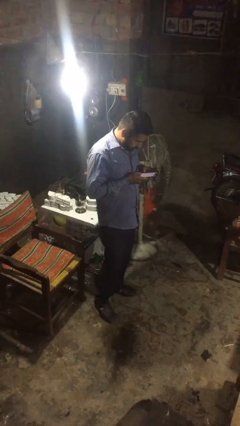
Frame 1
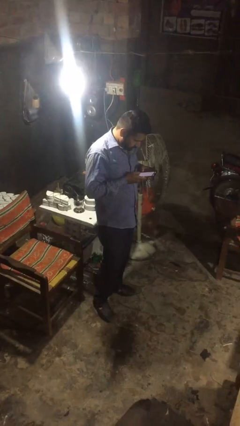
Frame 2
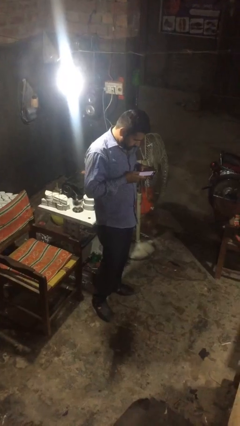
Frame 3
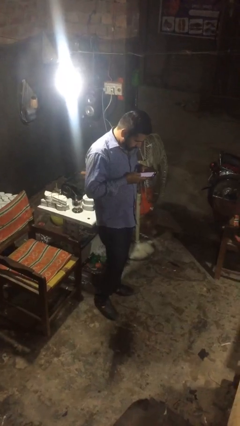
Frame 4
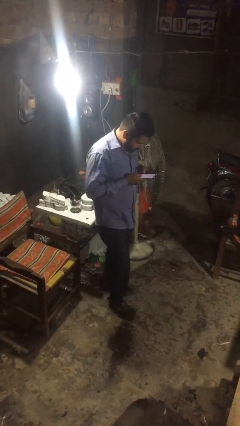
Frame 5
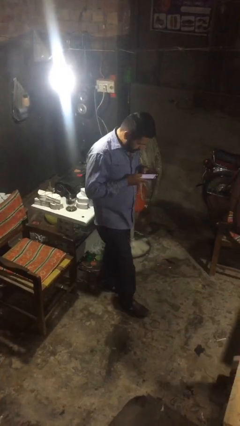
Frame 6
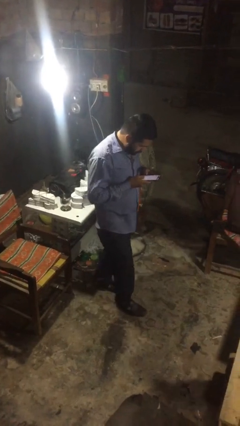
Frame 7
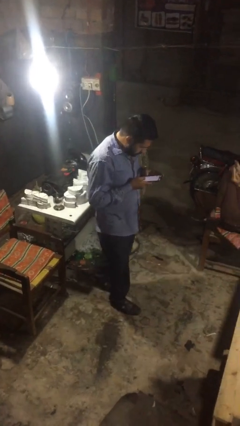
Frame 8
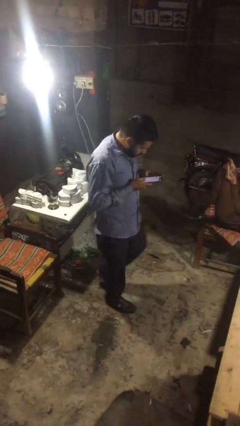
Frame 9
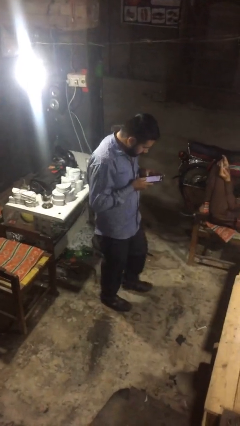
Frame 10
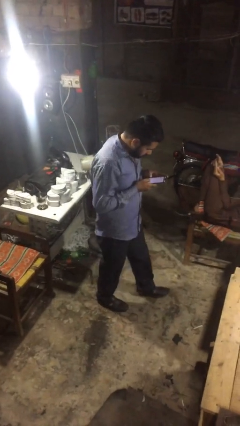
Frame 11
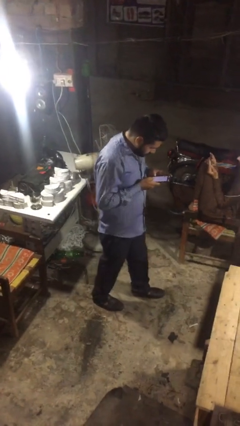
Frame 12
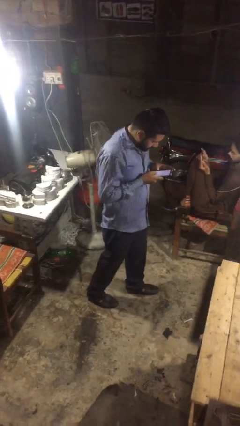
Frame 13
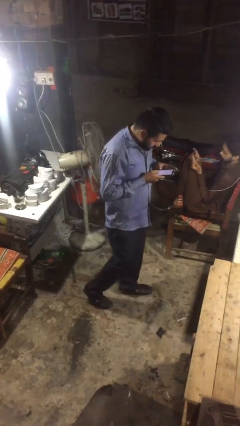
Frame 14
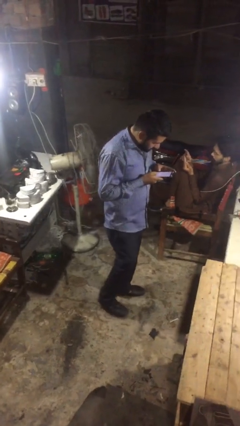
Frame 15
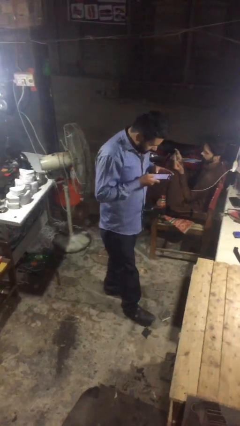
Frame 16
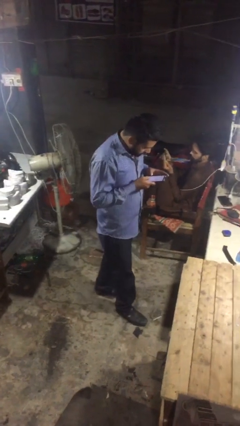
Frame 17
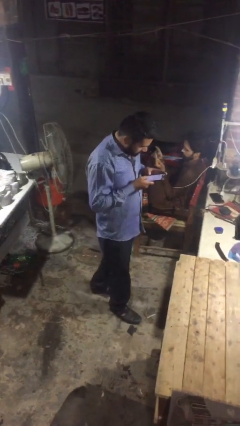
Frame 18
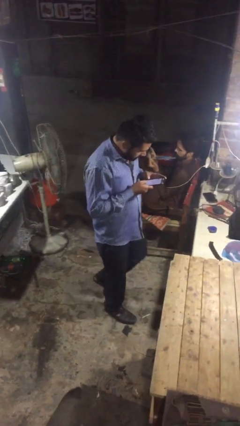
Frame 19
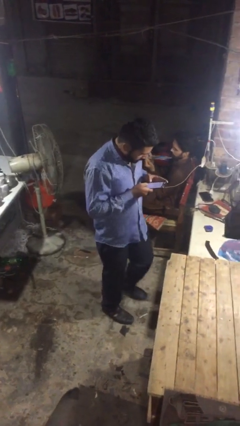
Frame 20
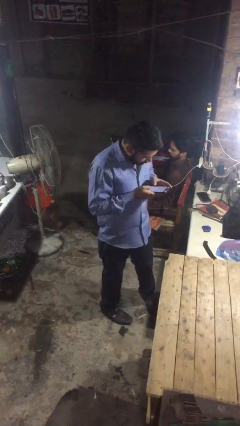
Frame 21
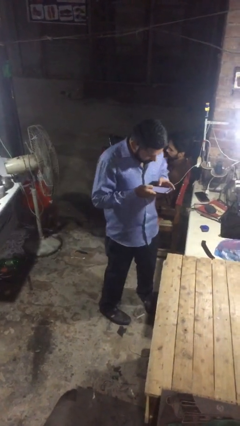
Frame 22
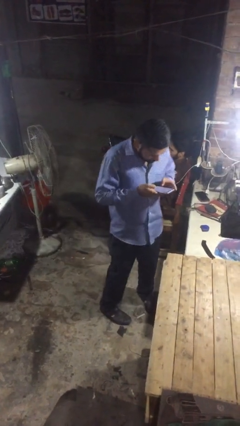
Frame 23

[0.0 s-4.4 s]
person texts on phone

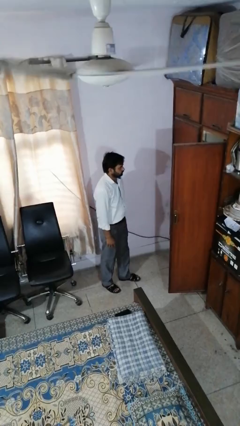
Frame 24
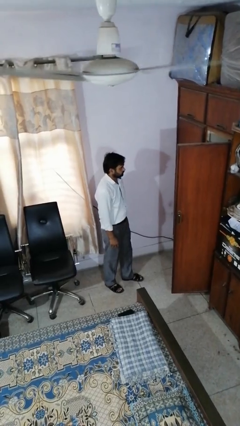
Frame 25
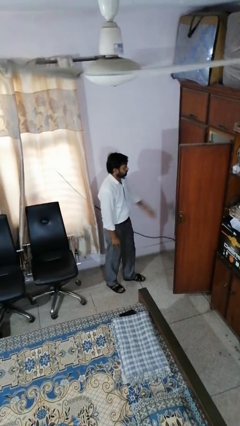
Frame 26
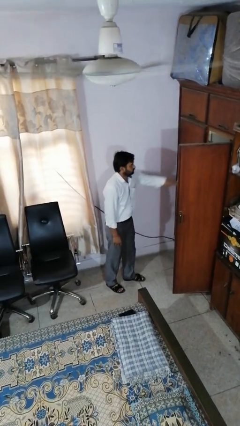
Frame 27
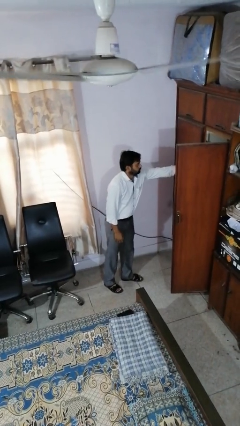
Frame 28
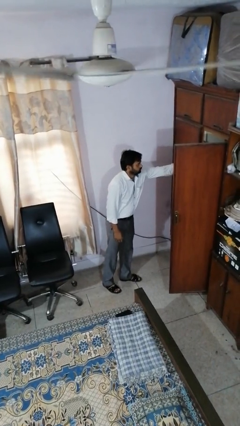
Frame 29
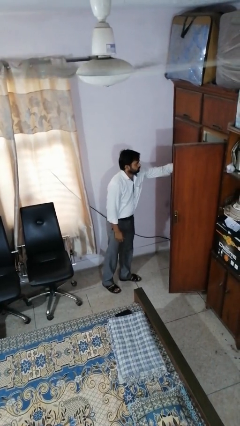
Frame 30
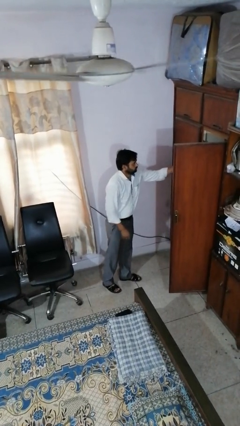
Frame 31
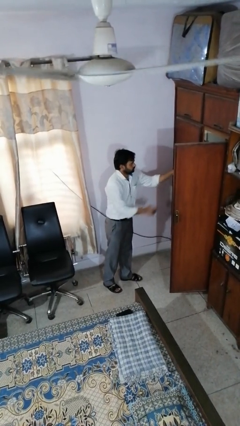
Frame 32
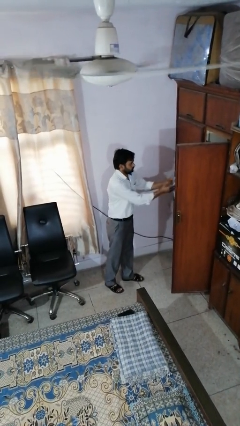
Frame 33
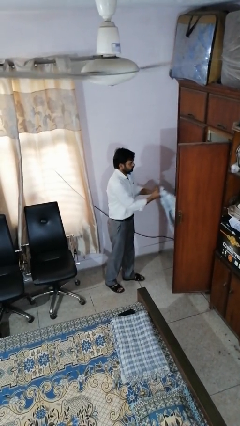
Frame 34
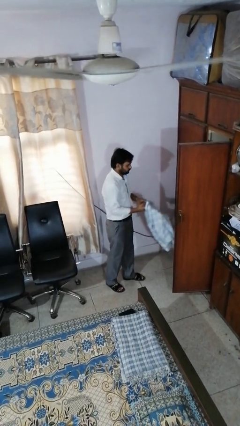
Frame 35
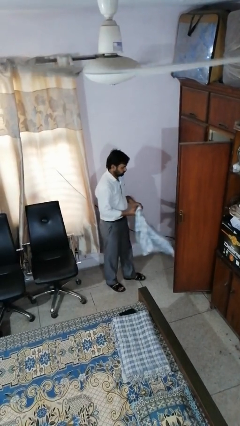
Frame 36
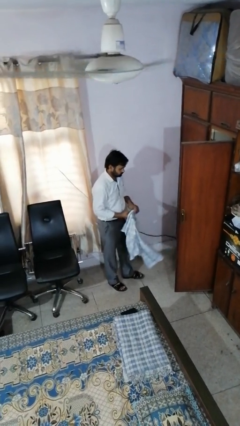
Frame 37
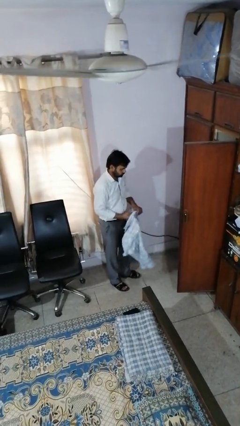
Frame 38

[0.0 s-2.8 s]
person takes clothes from closet

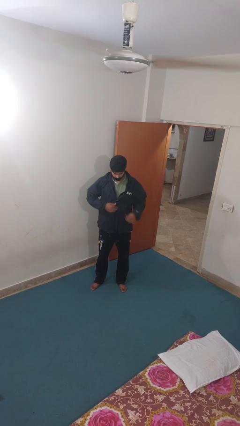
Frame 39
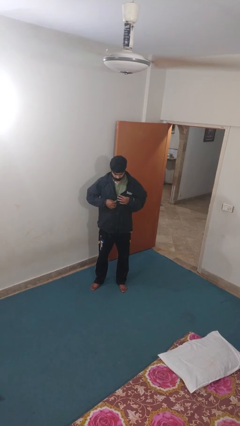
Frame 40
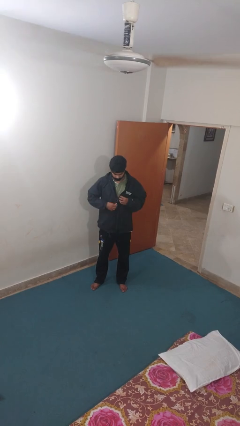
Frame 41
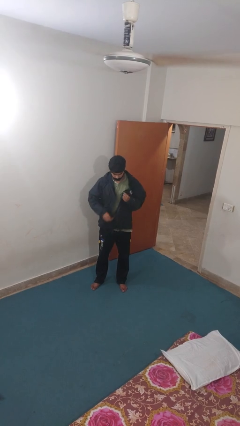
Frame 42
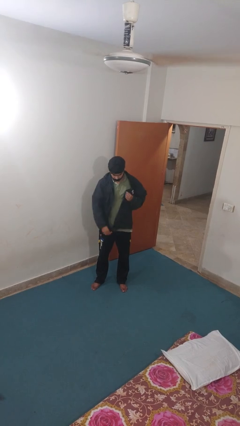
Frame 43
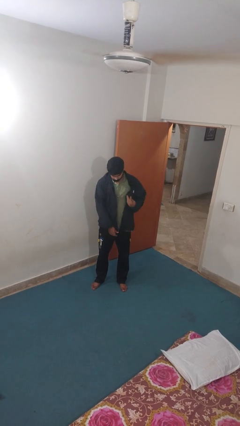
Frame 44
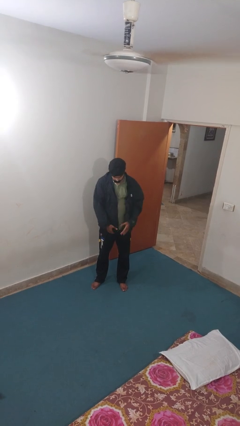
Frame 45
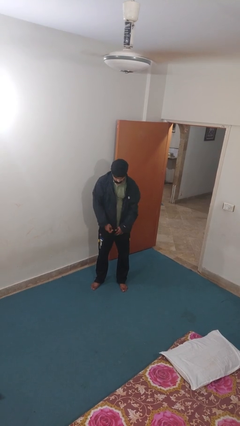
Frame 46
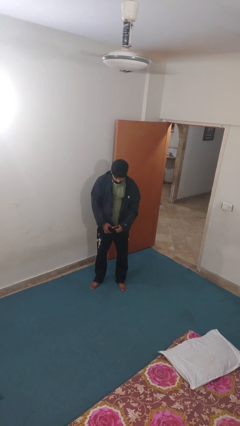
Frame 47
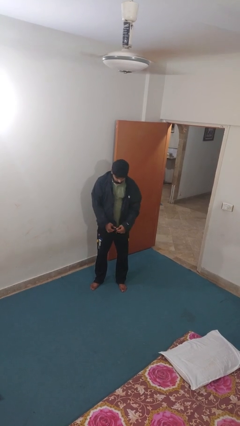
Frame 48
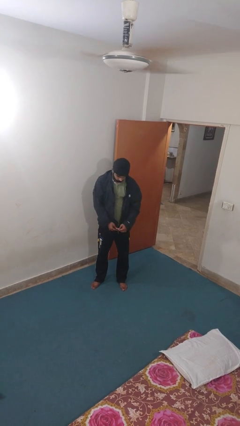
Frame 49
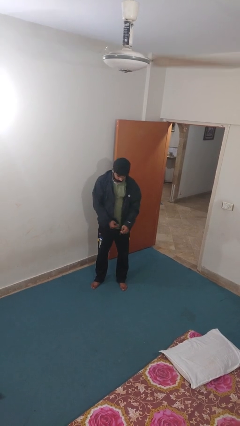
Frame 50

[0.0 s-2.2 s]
person unzips jacket

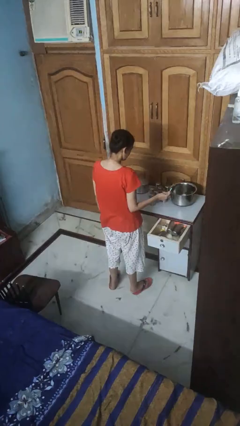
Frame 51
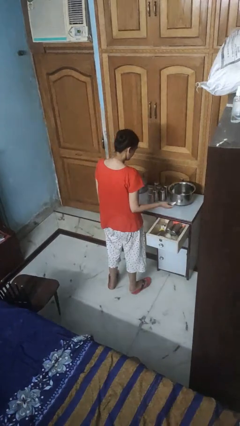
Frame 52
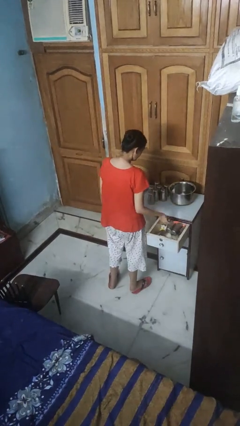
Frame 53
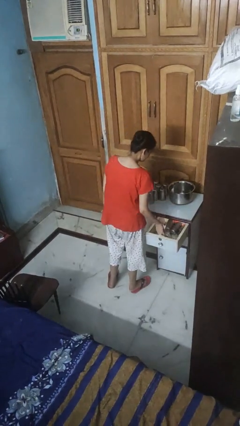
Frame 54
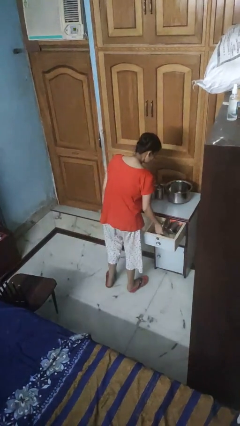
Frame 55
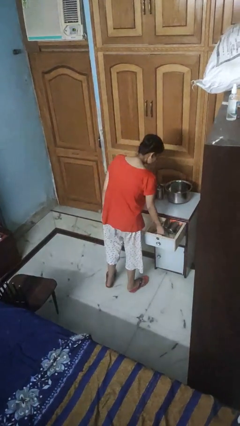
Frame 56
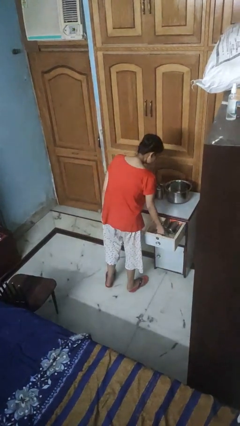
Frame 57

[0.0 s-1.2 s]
person puts object into kitchen drawer

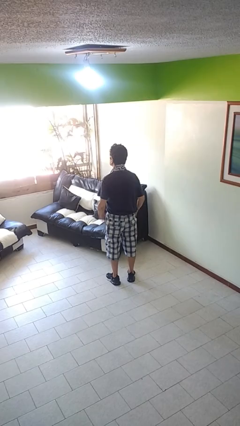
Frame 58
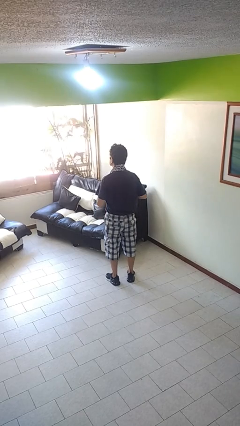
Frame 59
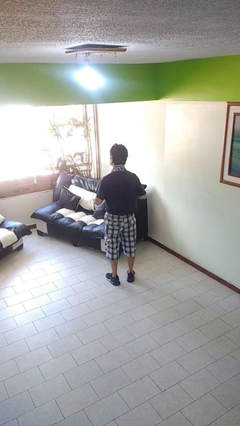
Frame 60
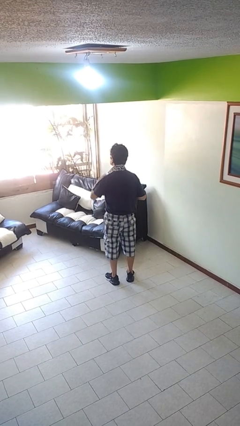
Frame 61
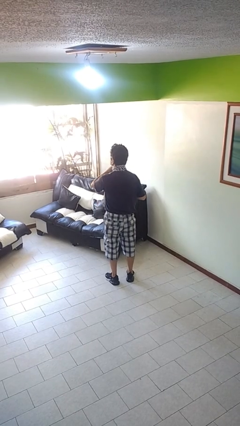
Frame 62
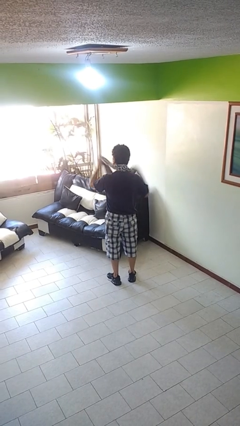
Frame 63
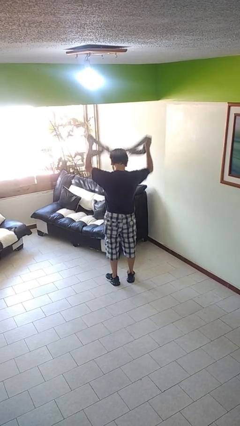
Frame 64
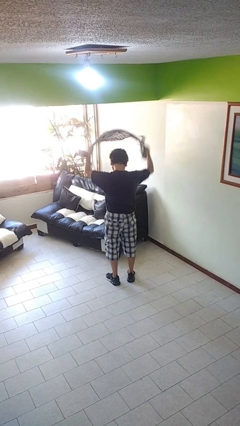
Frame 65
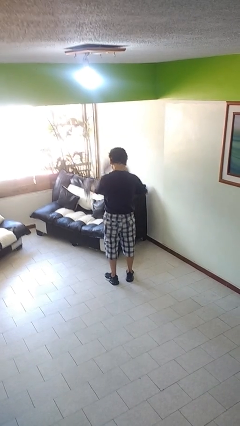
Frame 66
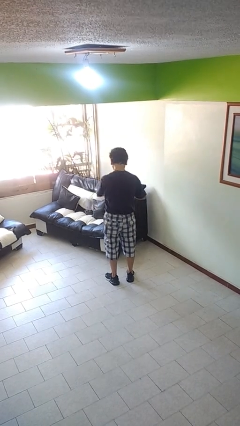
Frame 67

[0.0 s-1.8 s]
person takes off scarf

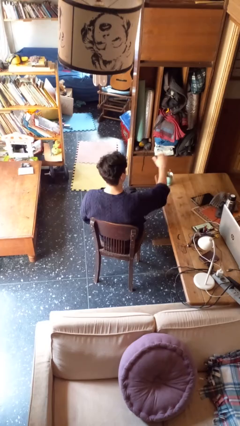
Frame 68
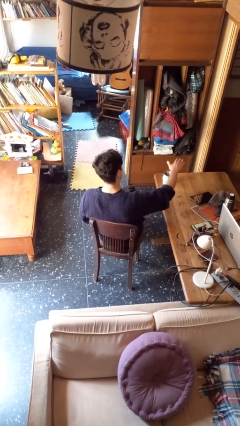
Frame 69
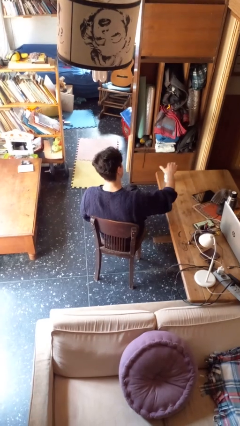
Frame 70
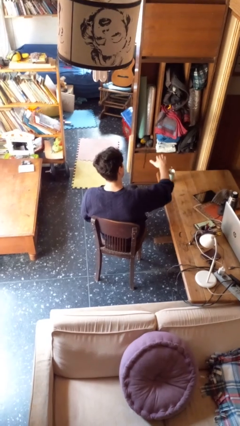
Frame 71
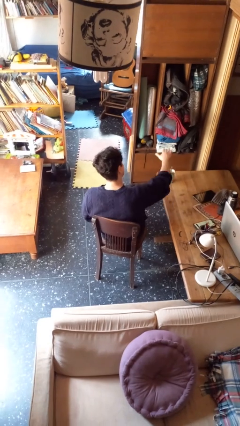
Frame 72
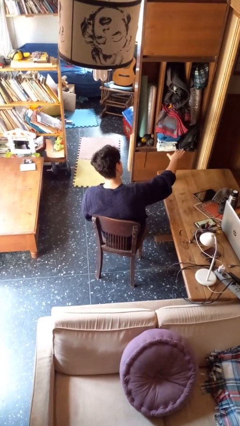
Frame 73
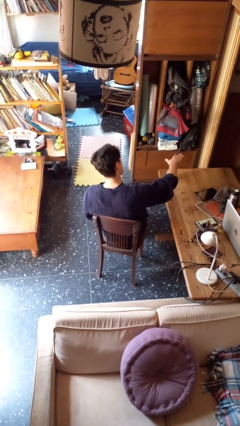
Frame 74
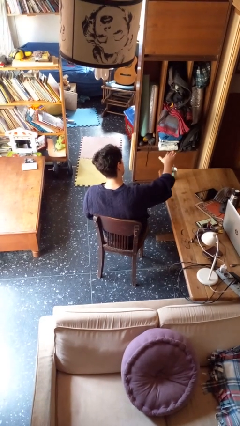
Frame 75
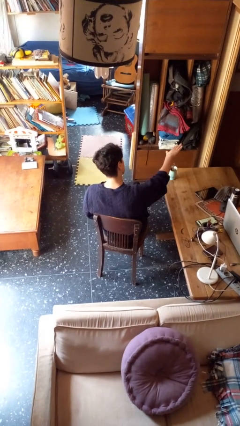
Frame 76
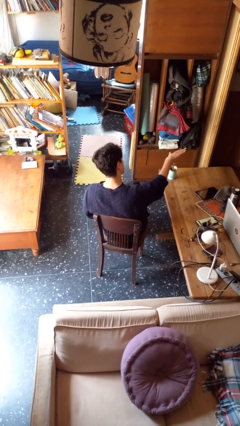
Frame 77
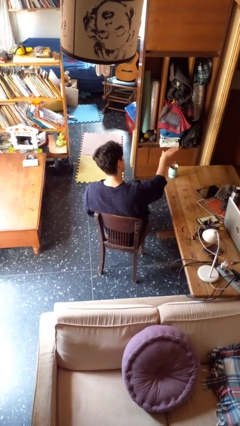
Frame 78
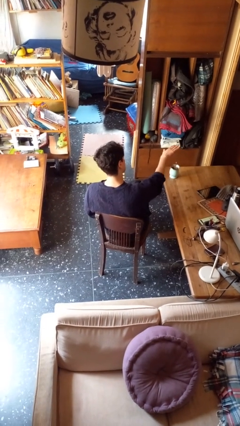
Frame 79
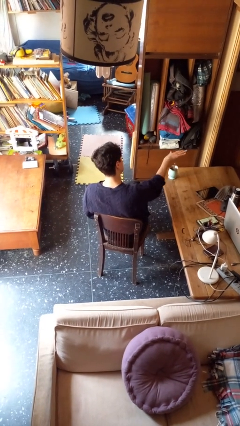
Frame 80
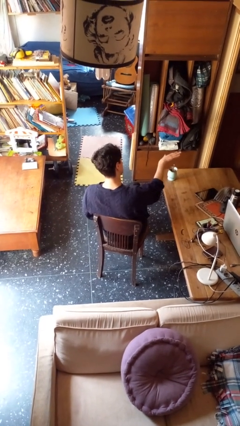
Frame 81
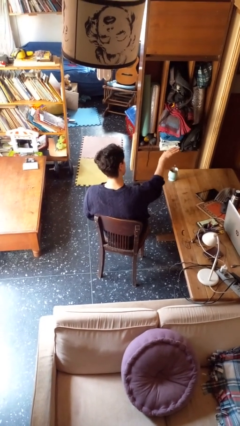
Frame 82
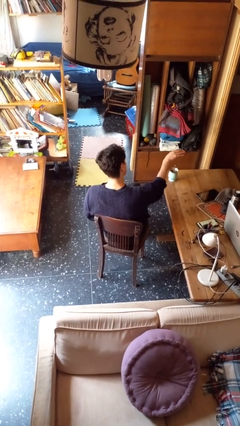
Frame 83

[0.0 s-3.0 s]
person waves hand over object

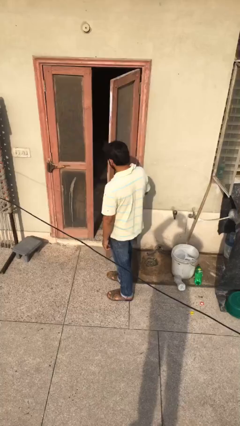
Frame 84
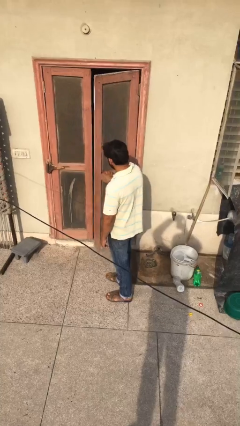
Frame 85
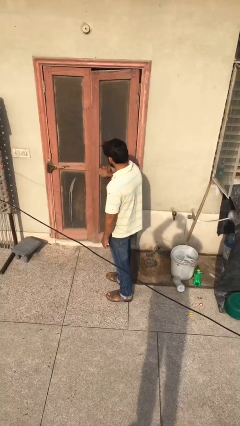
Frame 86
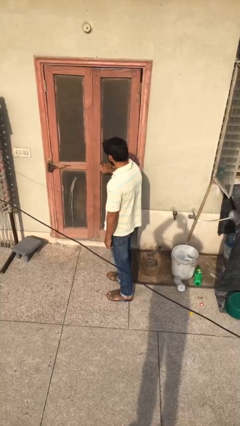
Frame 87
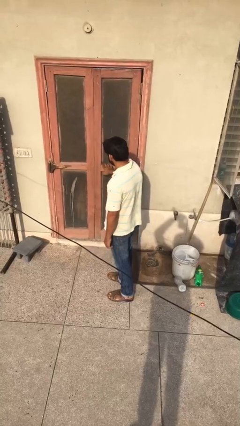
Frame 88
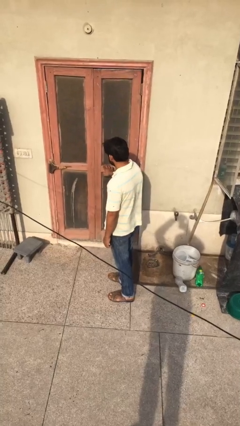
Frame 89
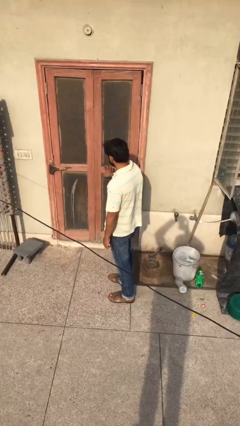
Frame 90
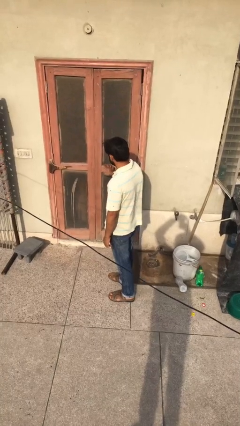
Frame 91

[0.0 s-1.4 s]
person closes facility door
